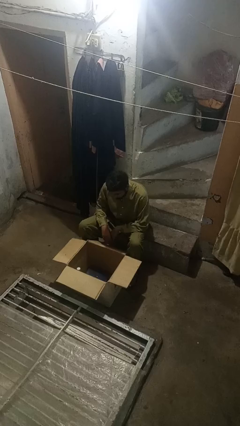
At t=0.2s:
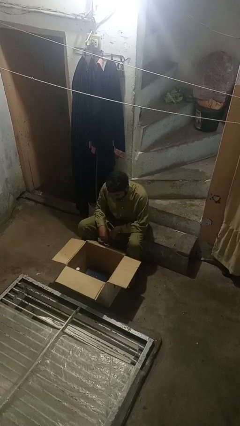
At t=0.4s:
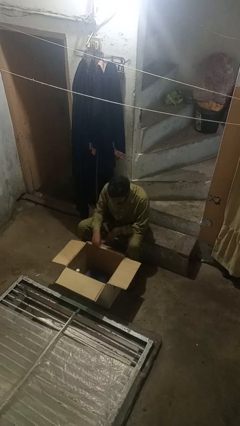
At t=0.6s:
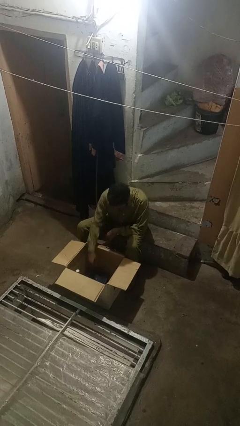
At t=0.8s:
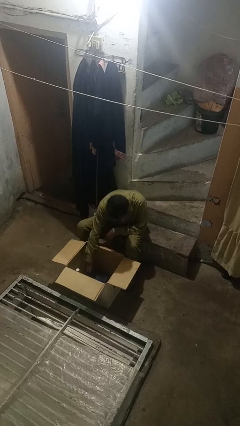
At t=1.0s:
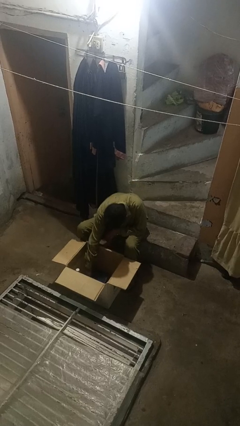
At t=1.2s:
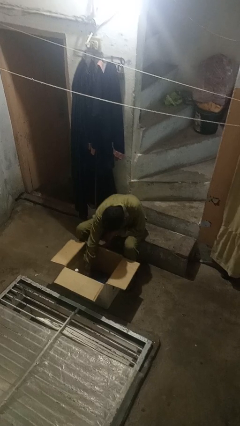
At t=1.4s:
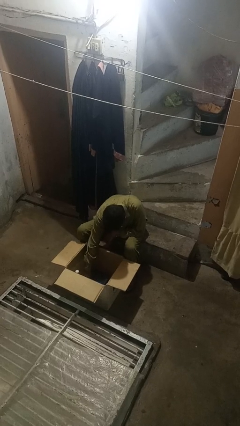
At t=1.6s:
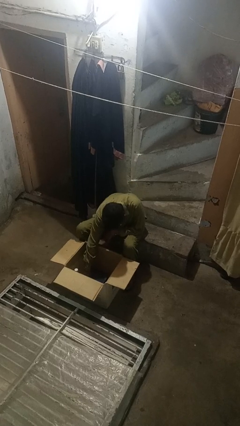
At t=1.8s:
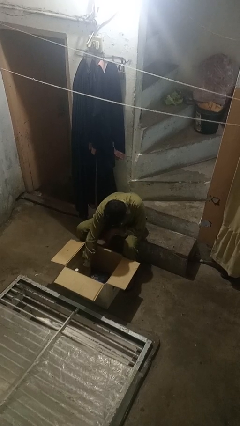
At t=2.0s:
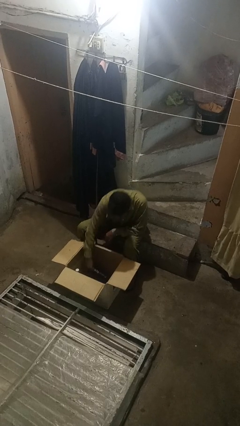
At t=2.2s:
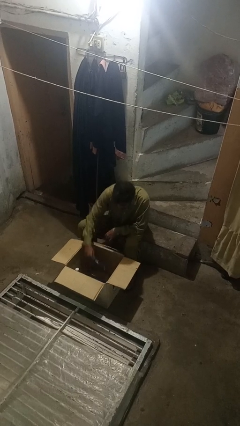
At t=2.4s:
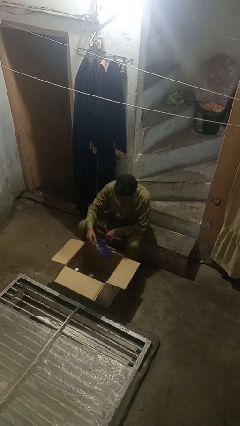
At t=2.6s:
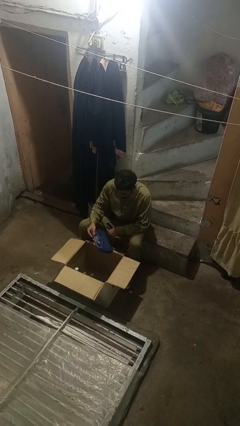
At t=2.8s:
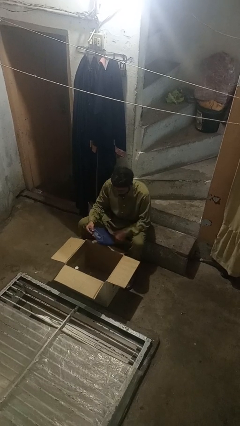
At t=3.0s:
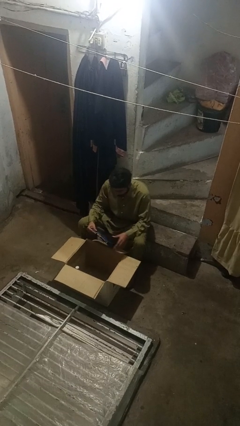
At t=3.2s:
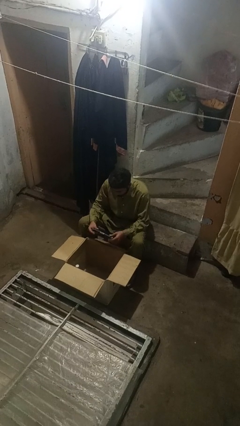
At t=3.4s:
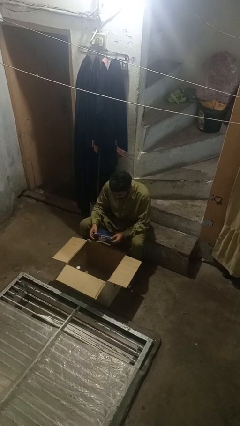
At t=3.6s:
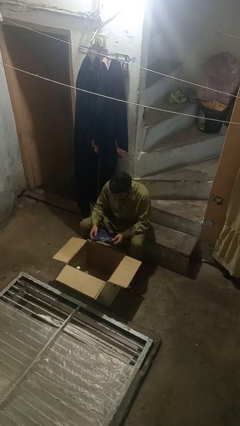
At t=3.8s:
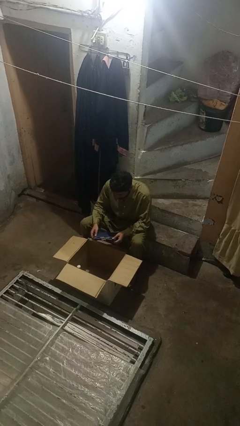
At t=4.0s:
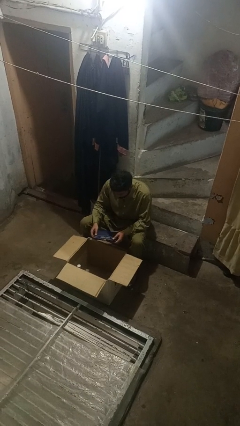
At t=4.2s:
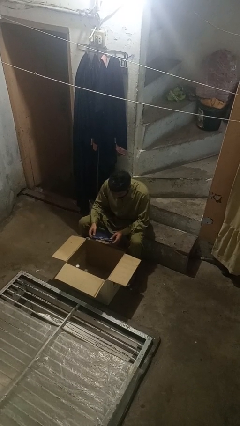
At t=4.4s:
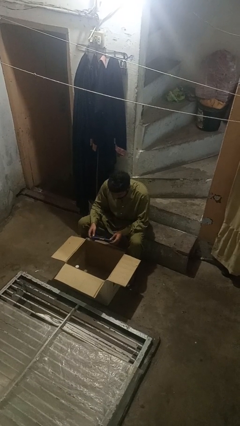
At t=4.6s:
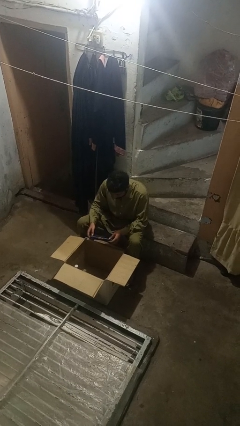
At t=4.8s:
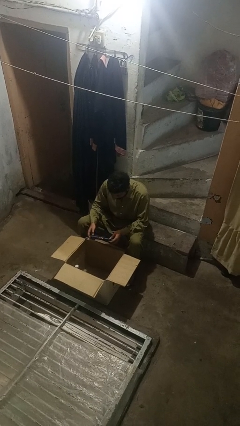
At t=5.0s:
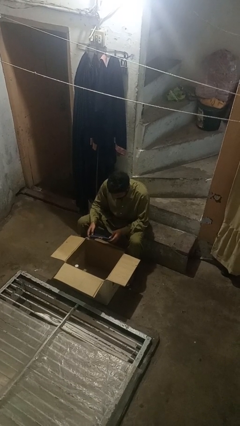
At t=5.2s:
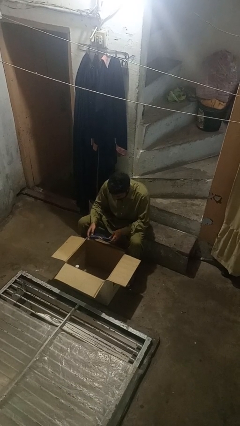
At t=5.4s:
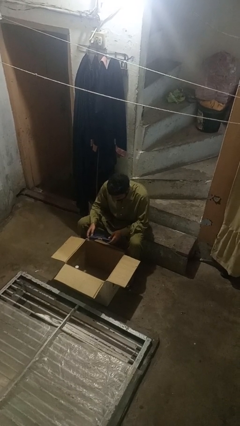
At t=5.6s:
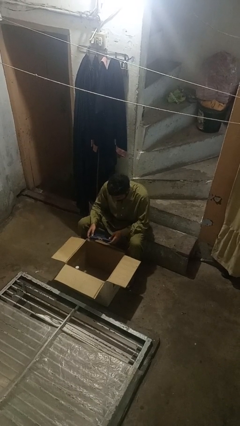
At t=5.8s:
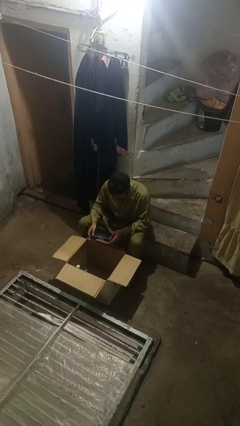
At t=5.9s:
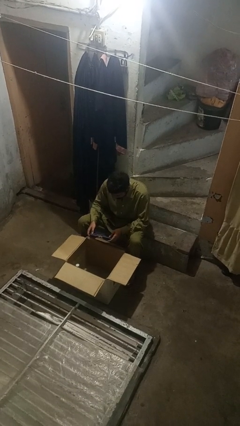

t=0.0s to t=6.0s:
person takes object from box

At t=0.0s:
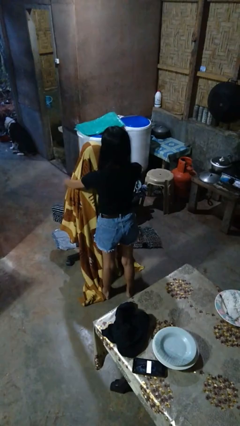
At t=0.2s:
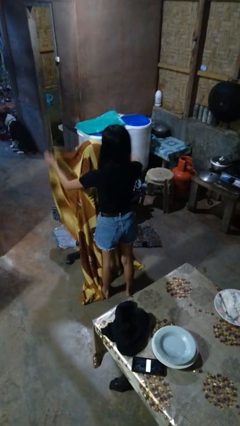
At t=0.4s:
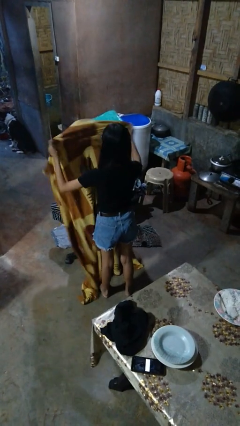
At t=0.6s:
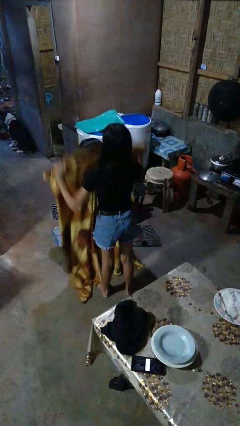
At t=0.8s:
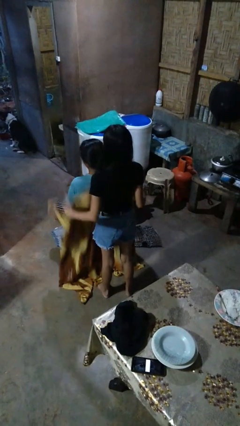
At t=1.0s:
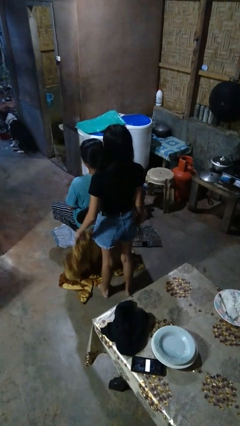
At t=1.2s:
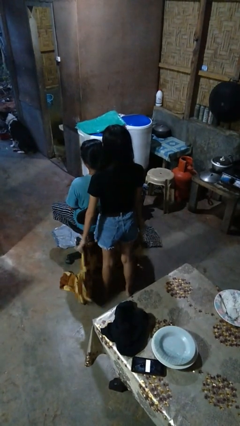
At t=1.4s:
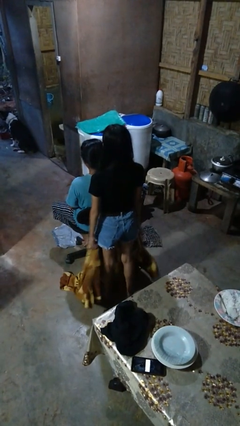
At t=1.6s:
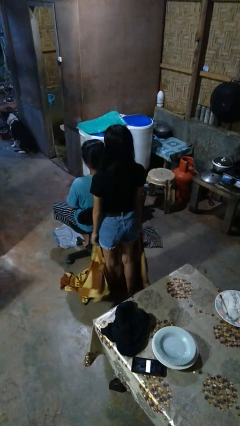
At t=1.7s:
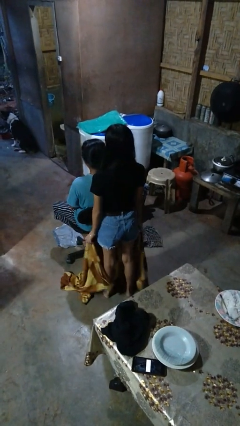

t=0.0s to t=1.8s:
person uncovers friend with blanket

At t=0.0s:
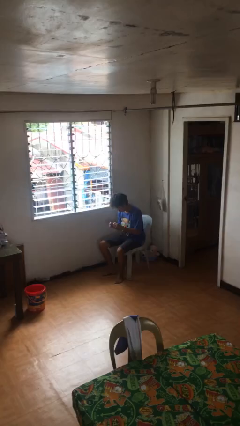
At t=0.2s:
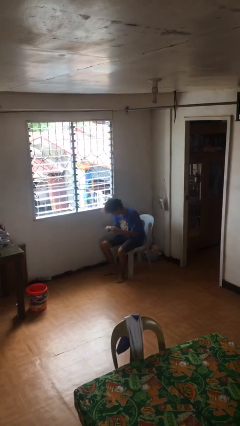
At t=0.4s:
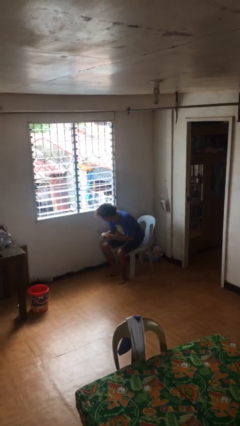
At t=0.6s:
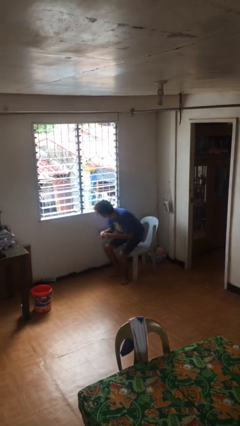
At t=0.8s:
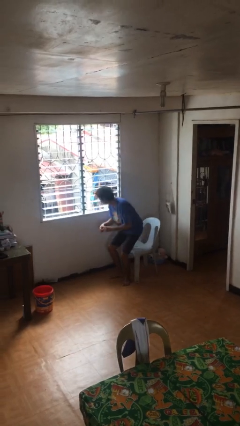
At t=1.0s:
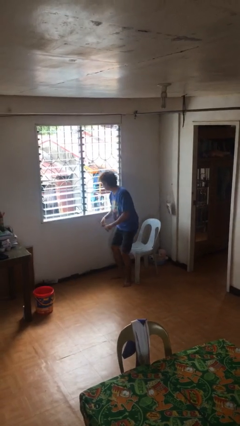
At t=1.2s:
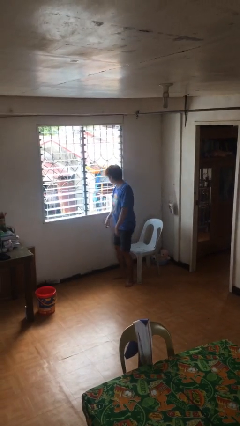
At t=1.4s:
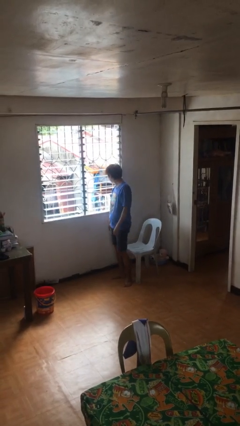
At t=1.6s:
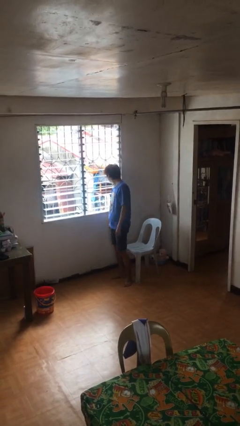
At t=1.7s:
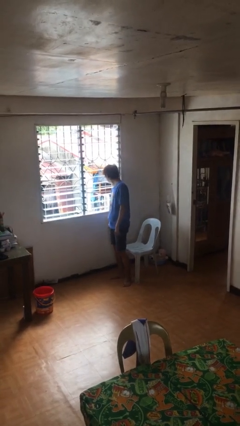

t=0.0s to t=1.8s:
person stands up

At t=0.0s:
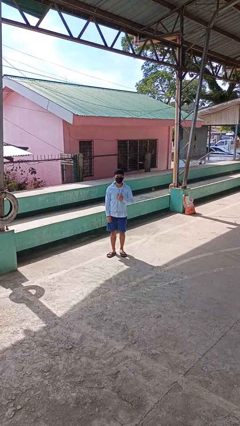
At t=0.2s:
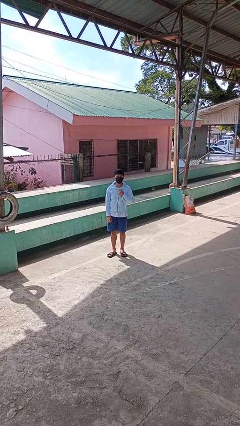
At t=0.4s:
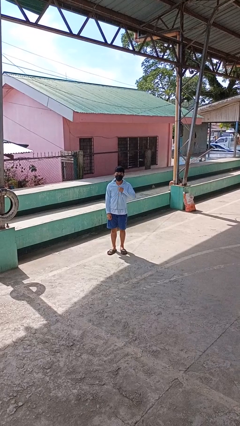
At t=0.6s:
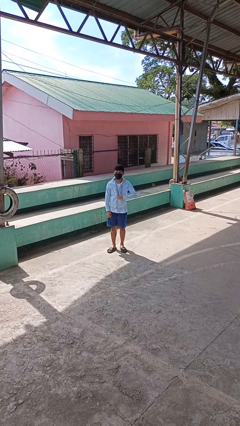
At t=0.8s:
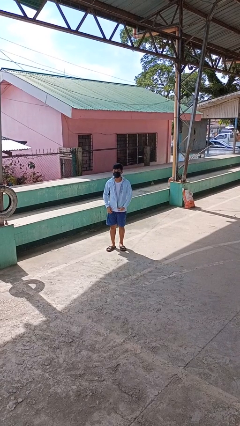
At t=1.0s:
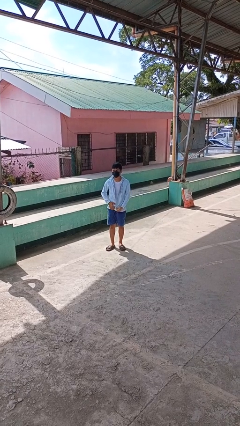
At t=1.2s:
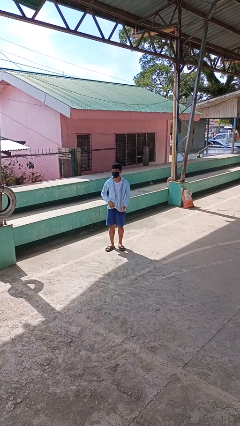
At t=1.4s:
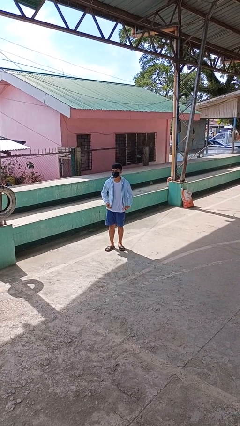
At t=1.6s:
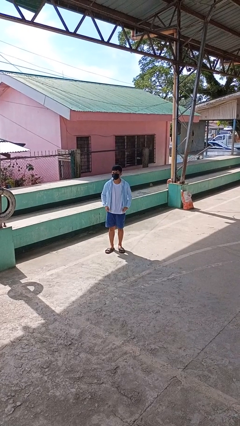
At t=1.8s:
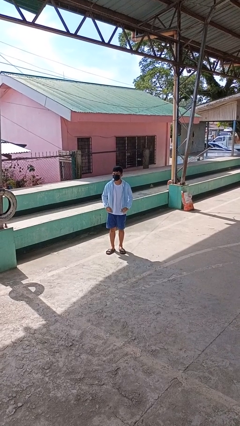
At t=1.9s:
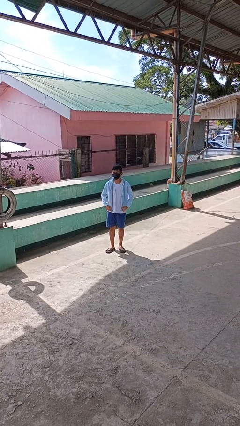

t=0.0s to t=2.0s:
person unzips jacket

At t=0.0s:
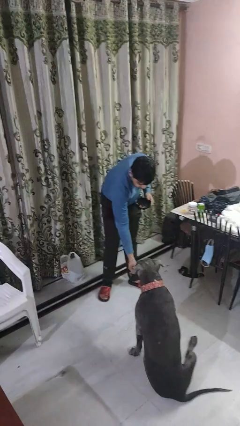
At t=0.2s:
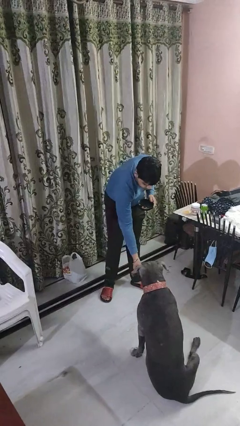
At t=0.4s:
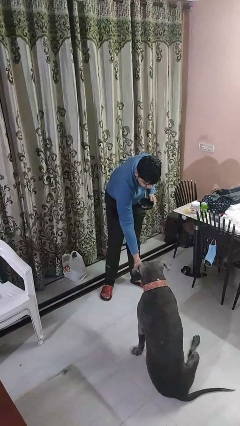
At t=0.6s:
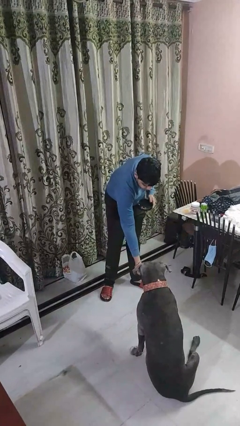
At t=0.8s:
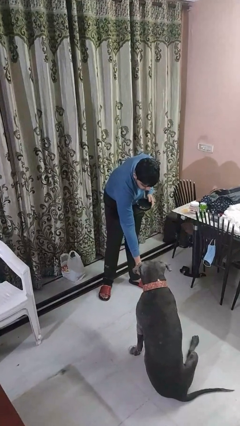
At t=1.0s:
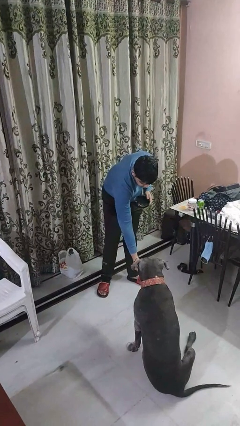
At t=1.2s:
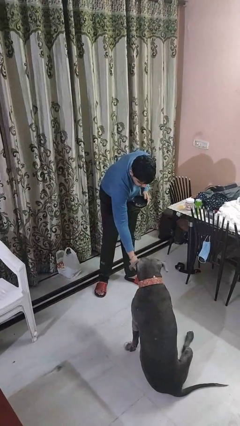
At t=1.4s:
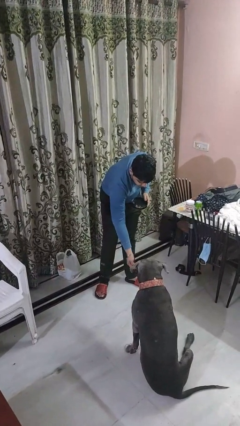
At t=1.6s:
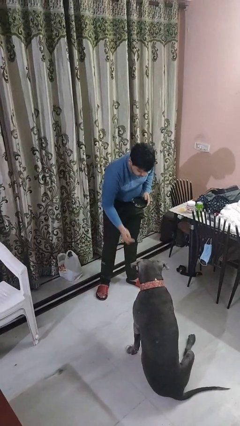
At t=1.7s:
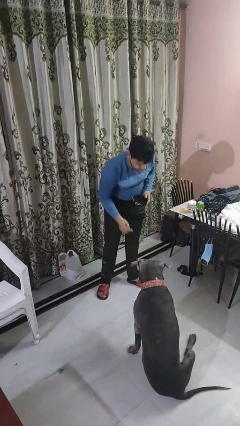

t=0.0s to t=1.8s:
person feeds dog

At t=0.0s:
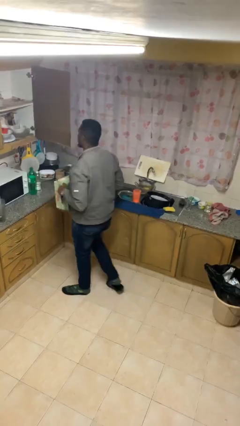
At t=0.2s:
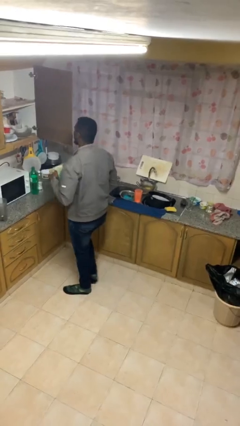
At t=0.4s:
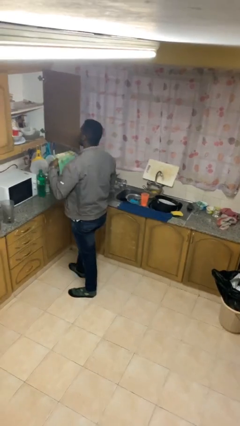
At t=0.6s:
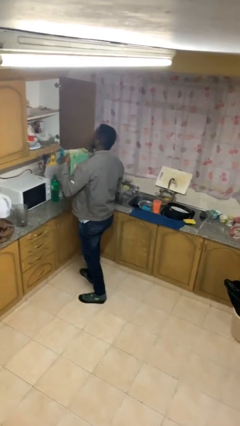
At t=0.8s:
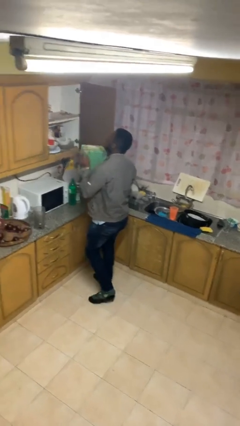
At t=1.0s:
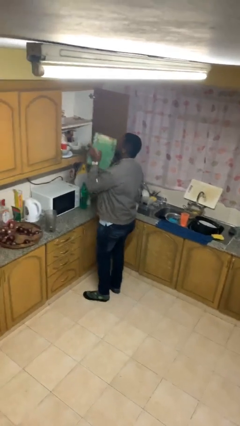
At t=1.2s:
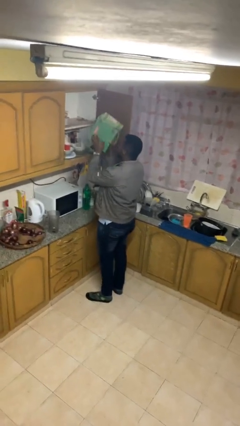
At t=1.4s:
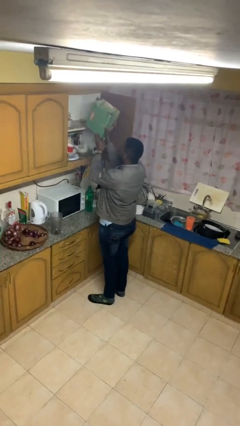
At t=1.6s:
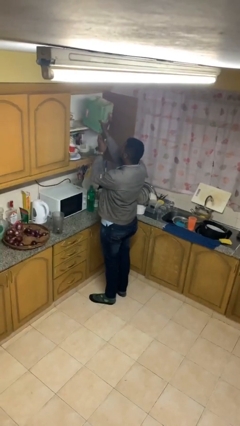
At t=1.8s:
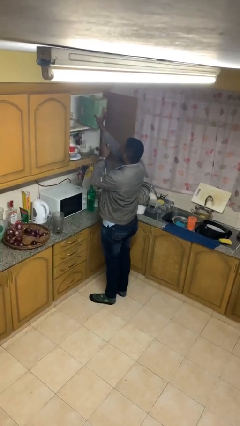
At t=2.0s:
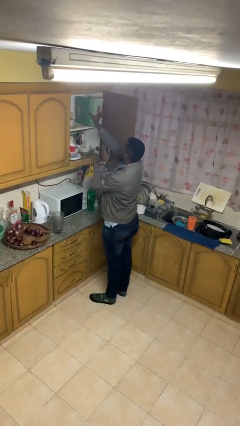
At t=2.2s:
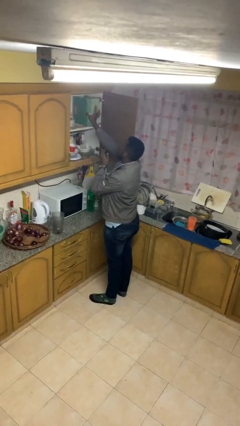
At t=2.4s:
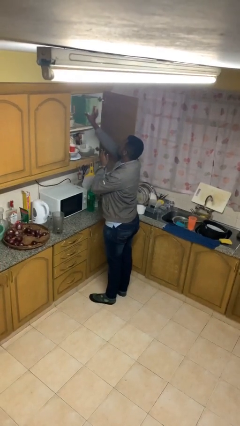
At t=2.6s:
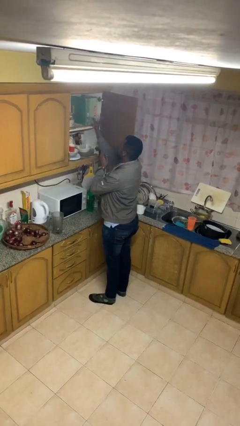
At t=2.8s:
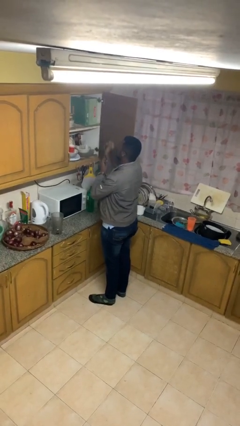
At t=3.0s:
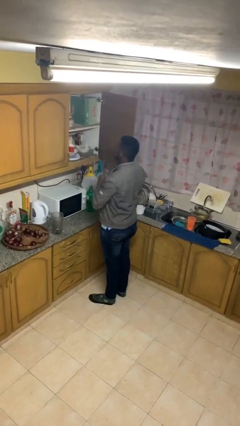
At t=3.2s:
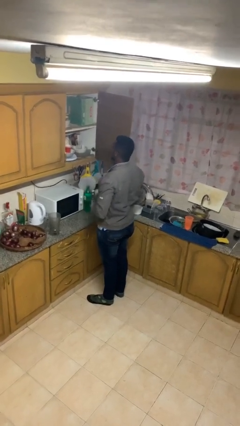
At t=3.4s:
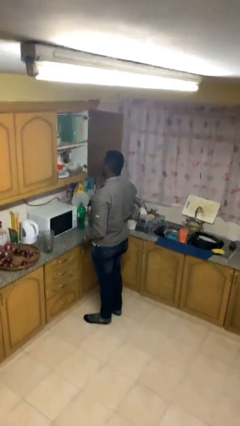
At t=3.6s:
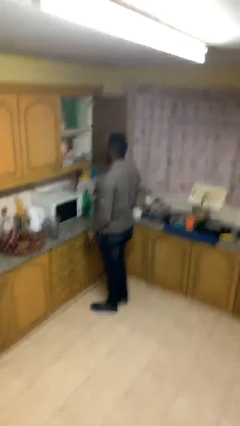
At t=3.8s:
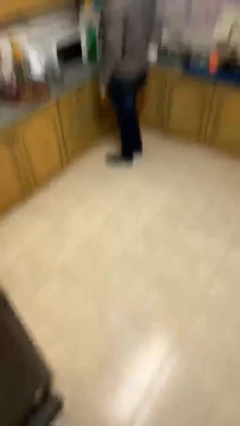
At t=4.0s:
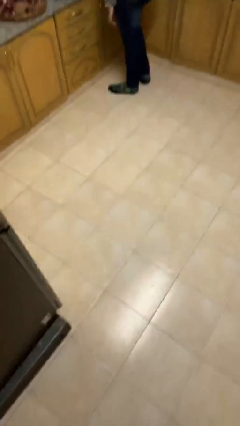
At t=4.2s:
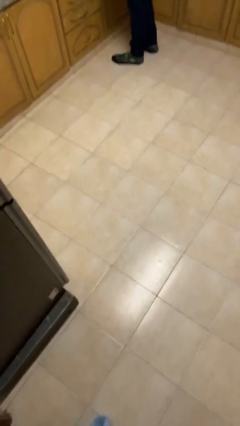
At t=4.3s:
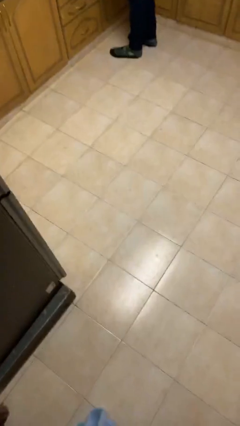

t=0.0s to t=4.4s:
person puts down object on shelf
